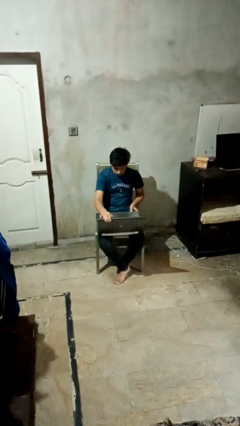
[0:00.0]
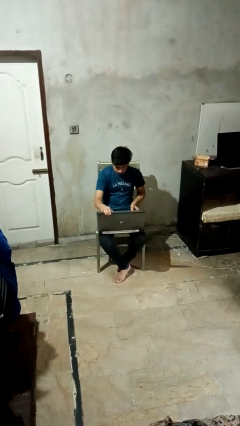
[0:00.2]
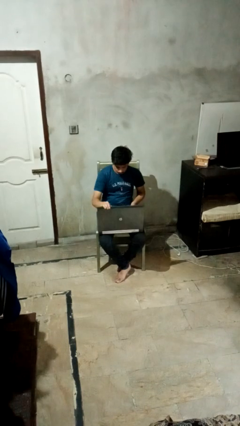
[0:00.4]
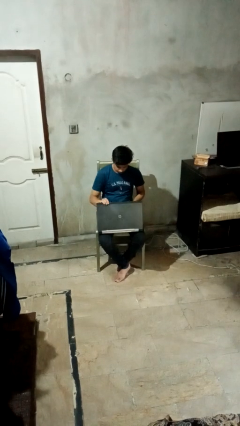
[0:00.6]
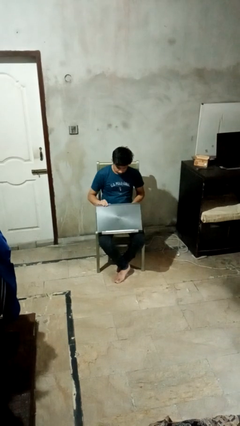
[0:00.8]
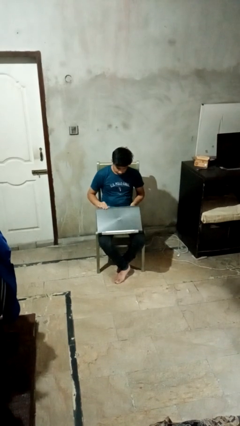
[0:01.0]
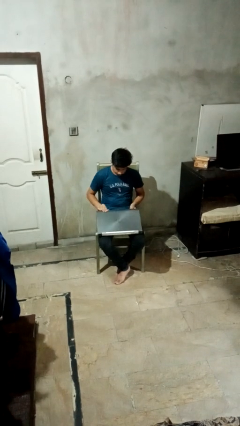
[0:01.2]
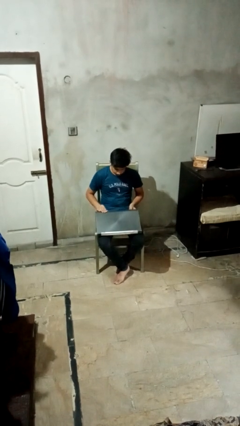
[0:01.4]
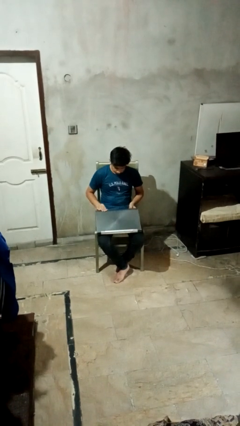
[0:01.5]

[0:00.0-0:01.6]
person closes laptop

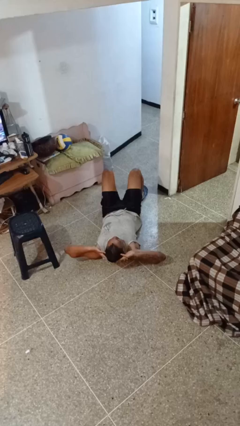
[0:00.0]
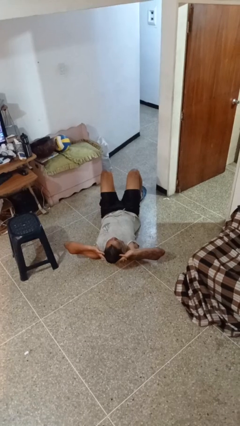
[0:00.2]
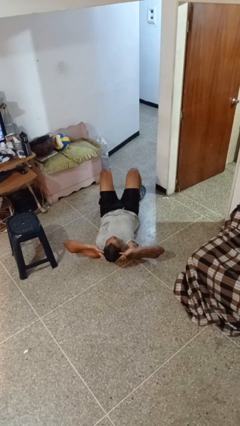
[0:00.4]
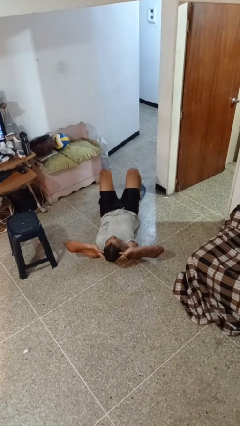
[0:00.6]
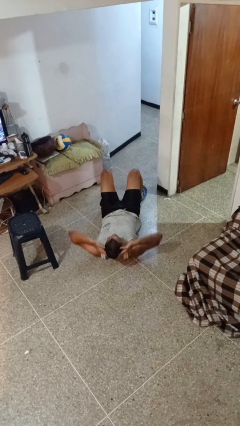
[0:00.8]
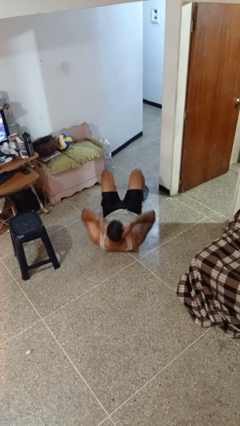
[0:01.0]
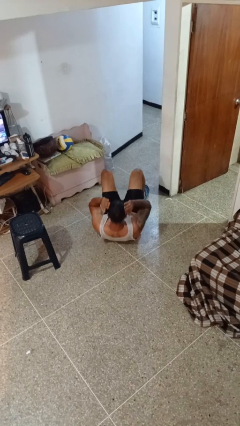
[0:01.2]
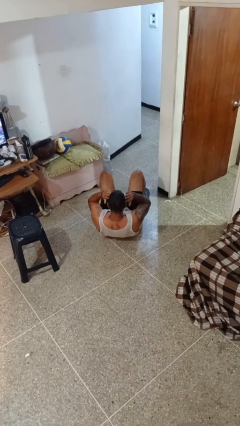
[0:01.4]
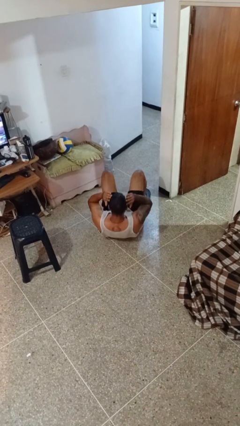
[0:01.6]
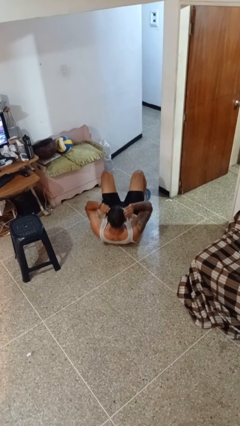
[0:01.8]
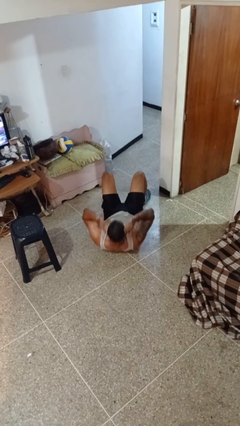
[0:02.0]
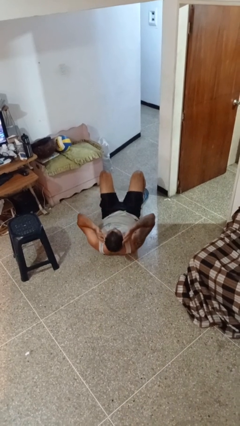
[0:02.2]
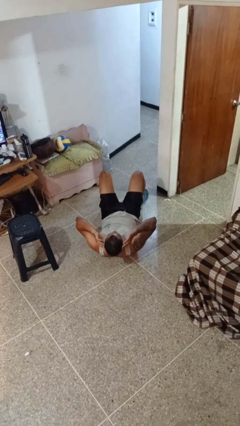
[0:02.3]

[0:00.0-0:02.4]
person exercises with situp

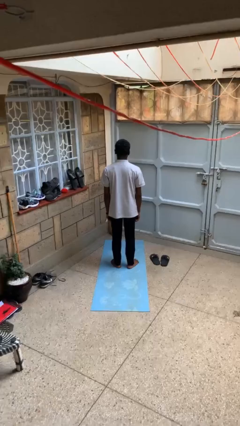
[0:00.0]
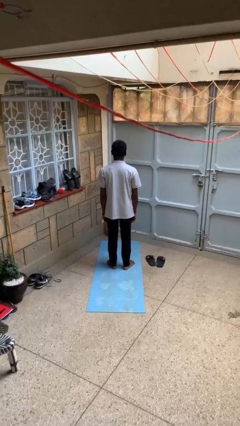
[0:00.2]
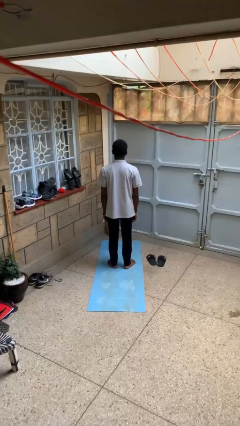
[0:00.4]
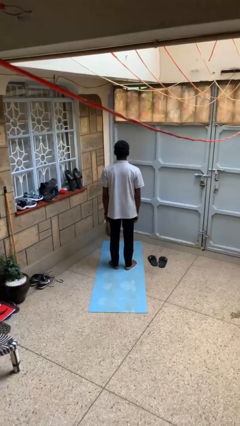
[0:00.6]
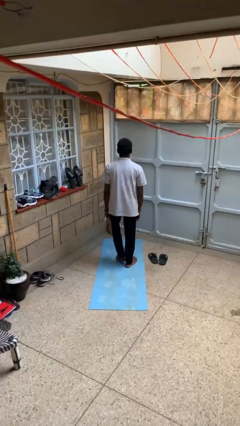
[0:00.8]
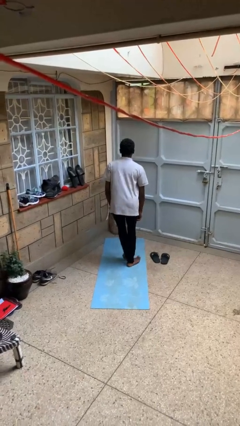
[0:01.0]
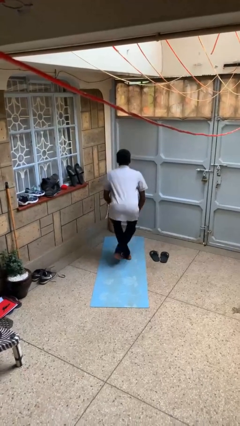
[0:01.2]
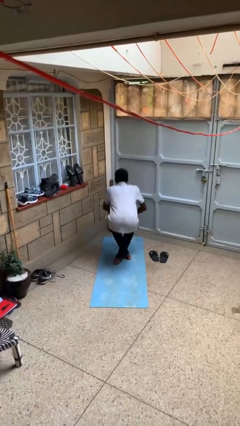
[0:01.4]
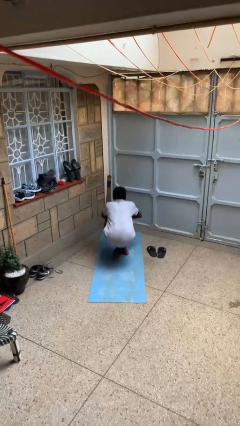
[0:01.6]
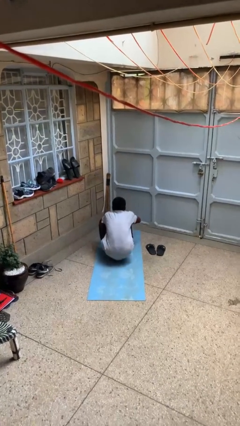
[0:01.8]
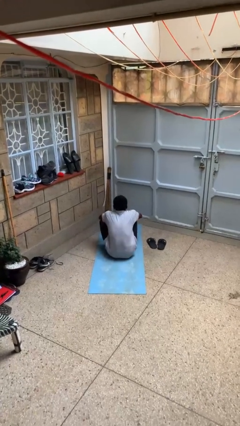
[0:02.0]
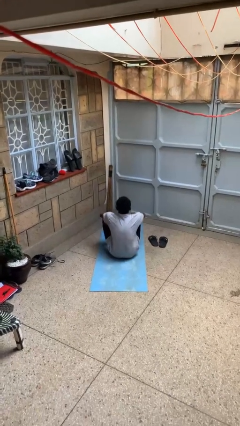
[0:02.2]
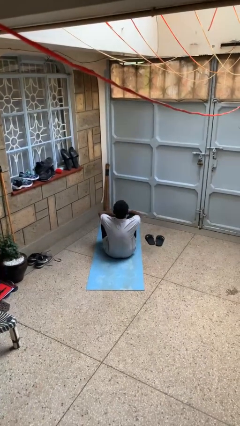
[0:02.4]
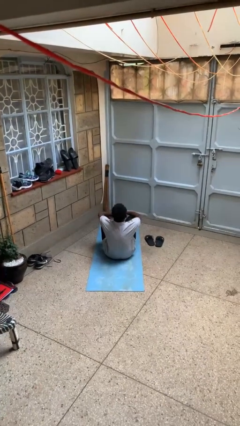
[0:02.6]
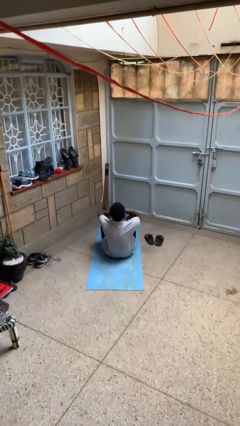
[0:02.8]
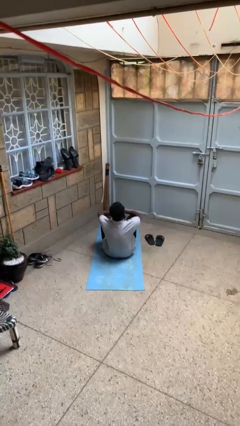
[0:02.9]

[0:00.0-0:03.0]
person sits crisscross

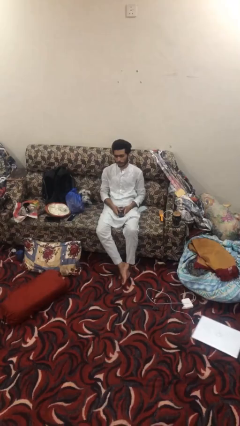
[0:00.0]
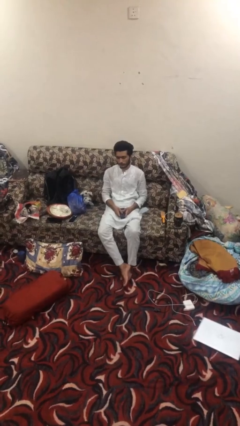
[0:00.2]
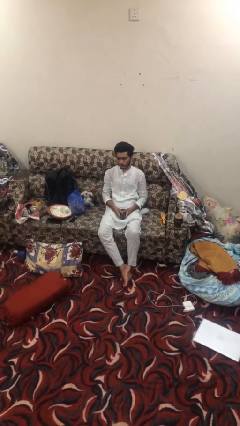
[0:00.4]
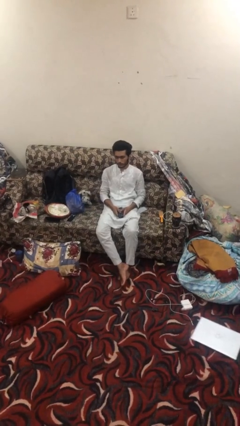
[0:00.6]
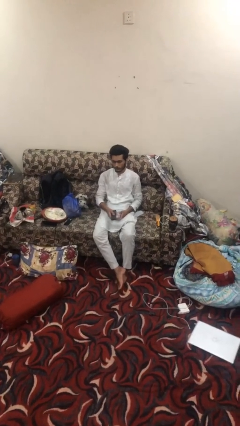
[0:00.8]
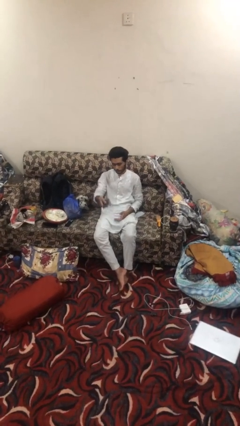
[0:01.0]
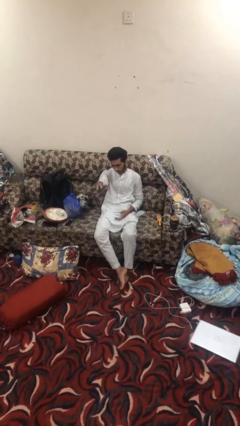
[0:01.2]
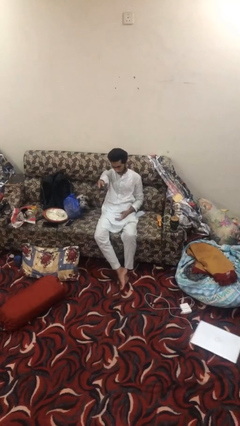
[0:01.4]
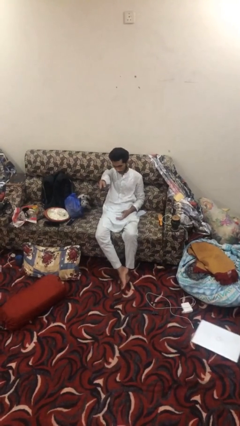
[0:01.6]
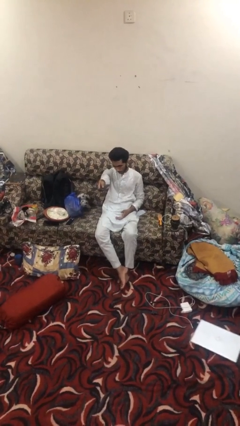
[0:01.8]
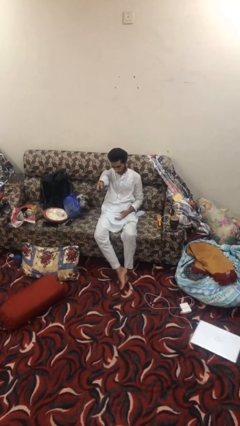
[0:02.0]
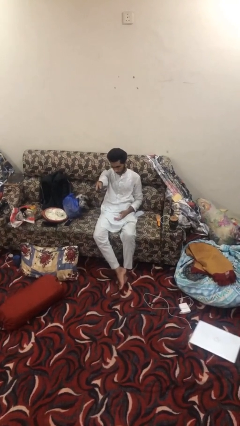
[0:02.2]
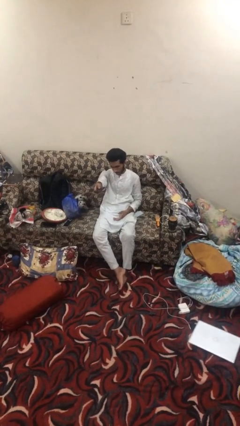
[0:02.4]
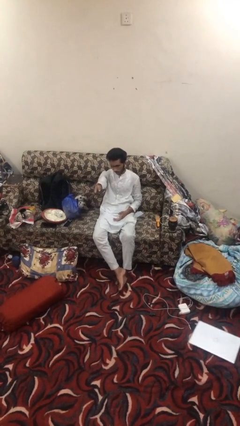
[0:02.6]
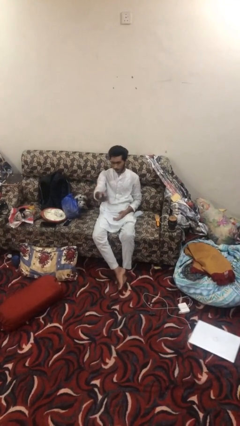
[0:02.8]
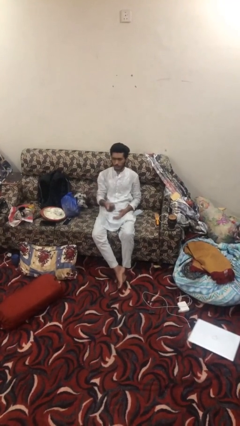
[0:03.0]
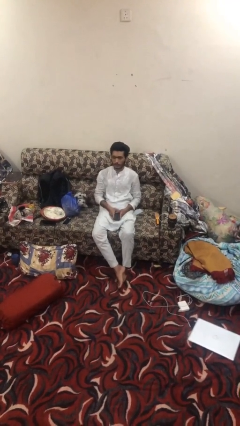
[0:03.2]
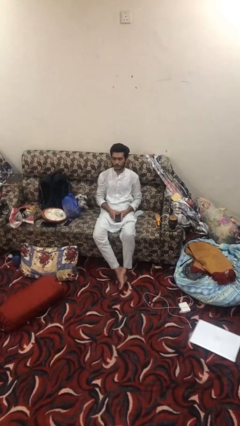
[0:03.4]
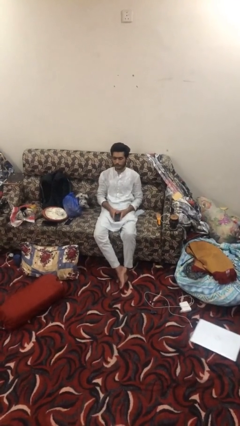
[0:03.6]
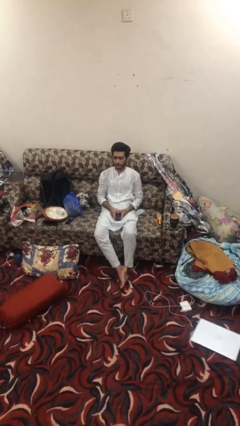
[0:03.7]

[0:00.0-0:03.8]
person uses television remote

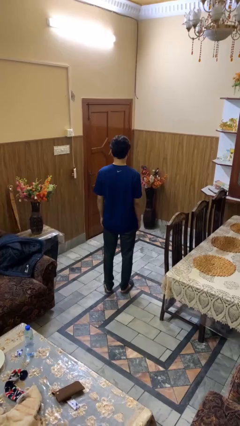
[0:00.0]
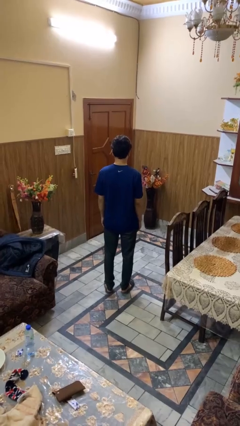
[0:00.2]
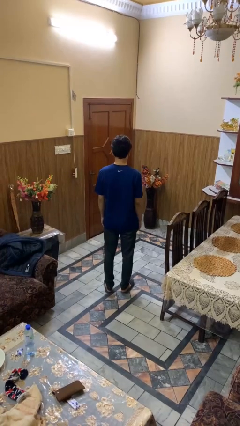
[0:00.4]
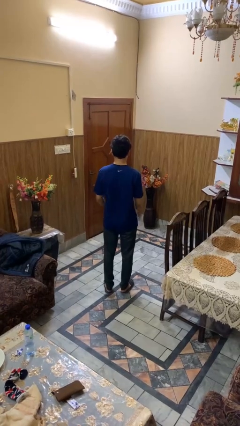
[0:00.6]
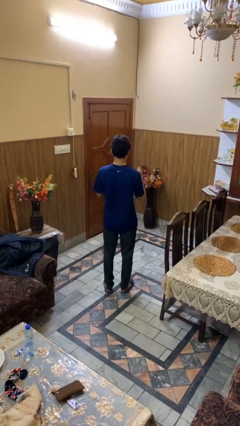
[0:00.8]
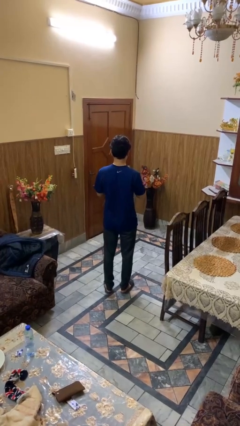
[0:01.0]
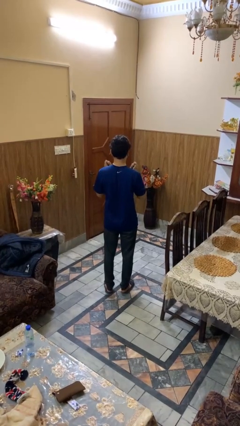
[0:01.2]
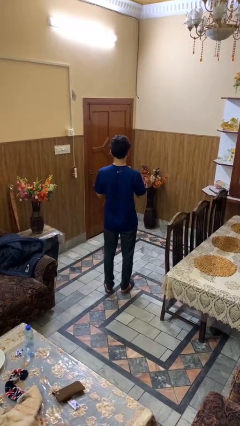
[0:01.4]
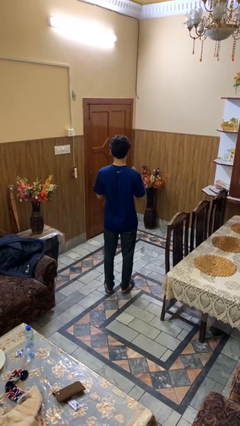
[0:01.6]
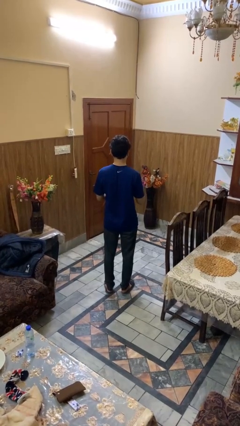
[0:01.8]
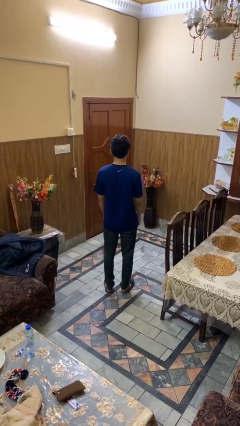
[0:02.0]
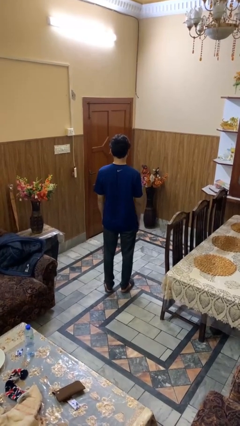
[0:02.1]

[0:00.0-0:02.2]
person drums on chest

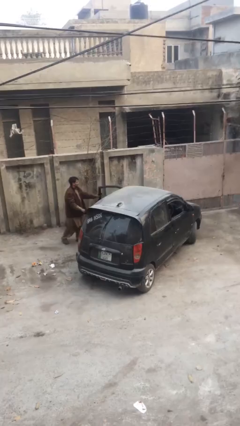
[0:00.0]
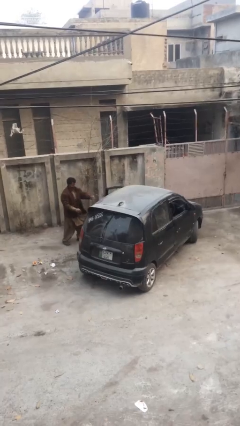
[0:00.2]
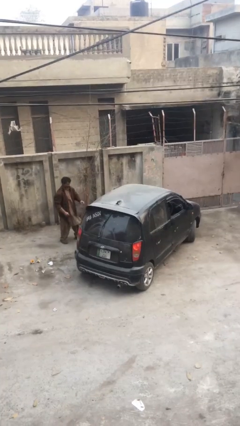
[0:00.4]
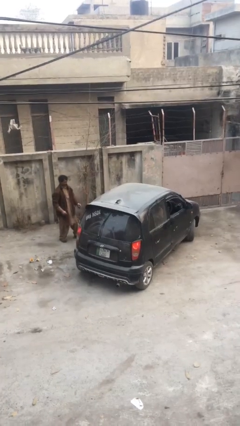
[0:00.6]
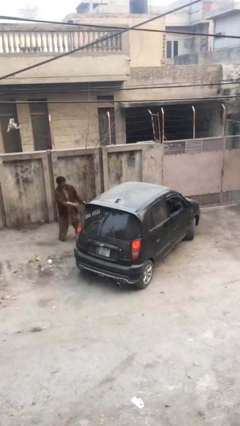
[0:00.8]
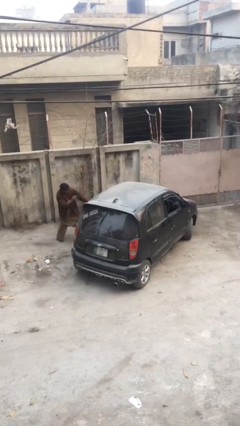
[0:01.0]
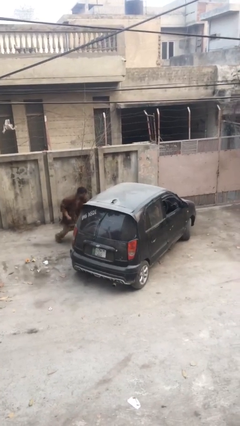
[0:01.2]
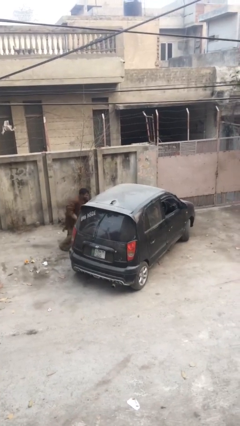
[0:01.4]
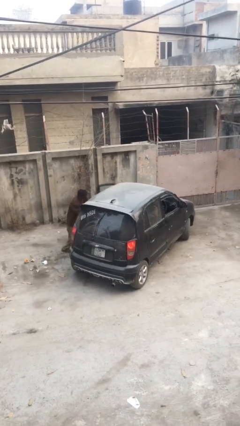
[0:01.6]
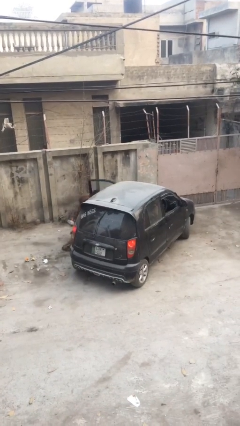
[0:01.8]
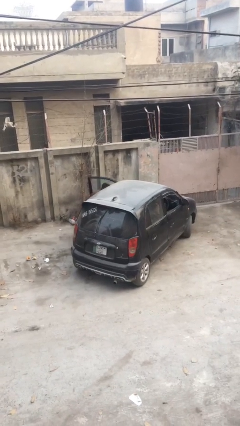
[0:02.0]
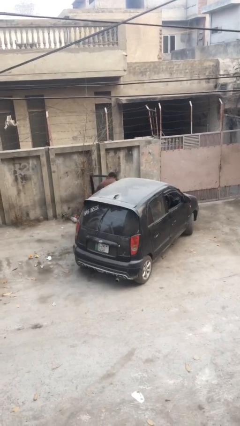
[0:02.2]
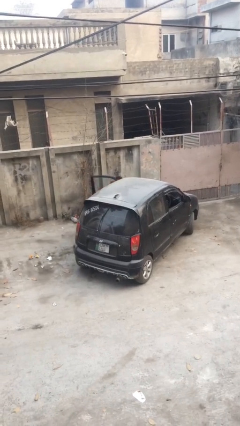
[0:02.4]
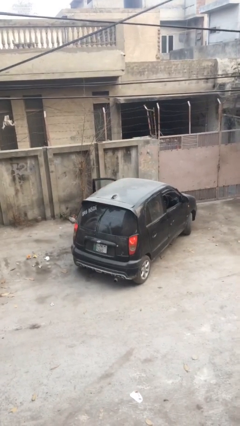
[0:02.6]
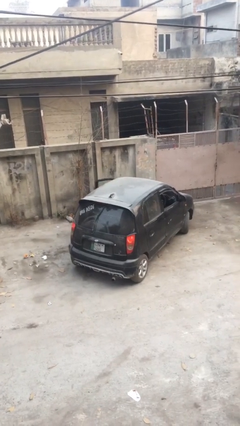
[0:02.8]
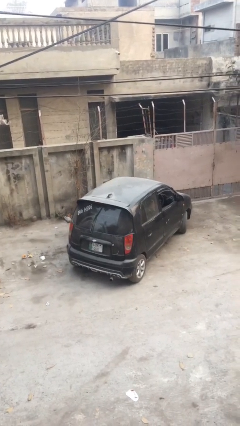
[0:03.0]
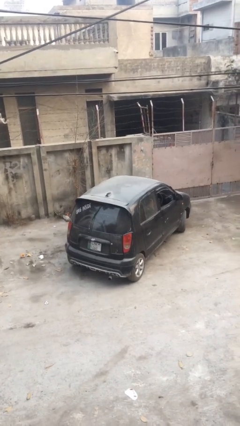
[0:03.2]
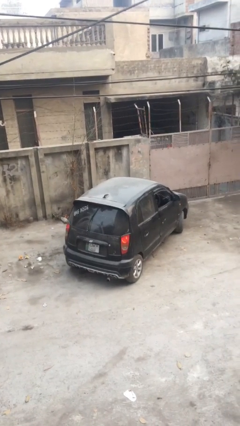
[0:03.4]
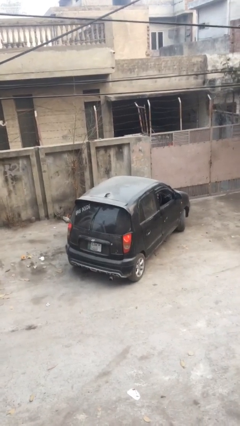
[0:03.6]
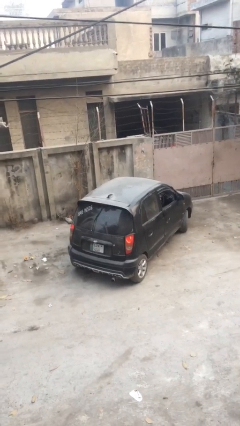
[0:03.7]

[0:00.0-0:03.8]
car picks up person

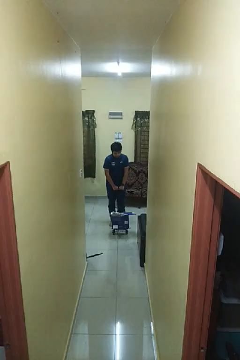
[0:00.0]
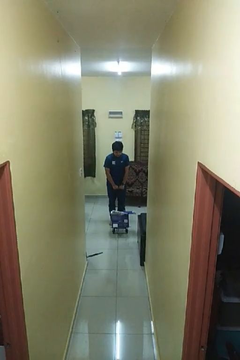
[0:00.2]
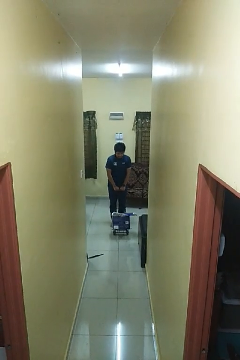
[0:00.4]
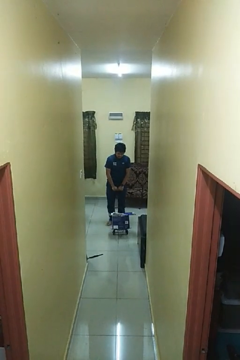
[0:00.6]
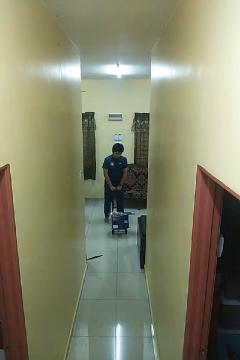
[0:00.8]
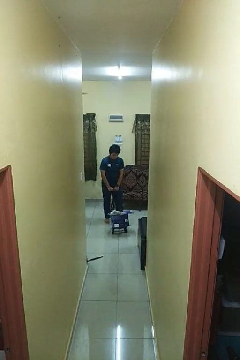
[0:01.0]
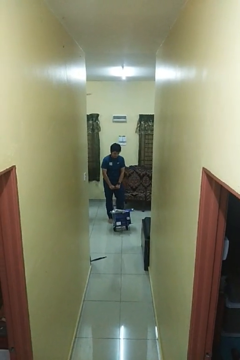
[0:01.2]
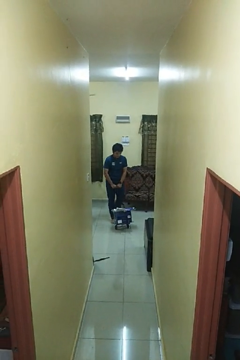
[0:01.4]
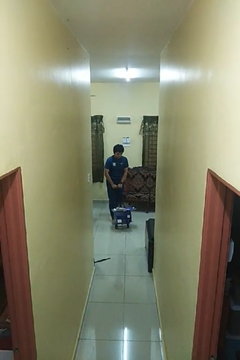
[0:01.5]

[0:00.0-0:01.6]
person pulls wheeled cart
